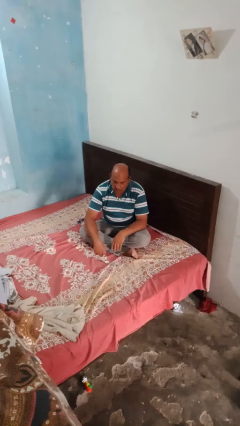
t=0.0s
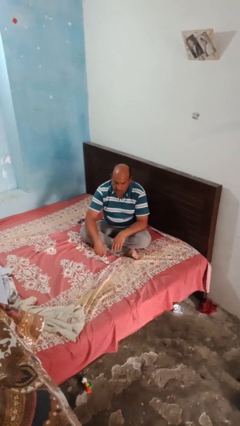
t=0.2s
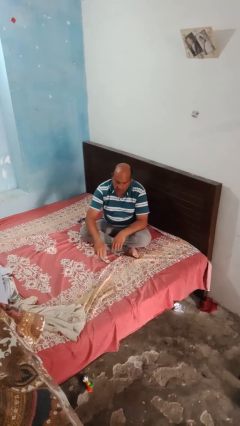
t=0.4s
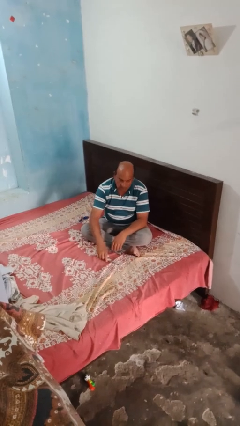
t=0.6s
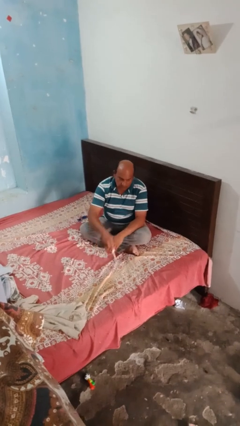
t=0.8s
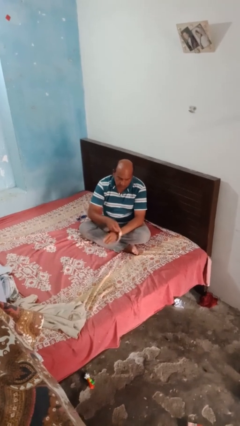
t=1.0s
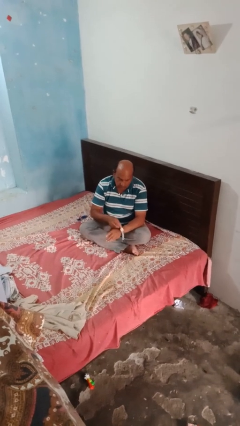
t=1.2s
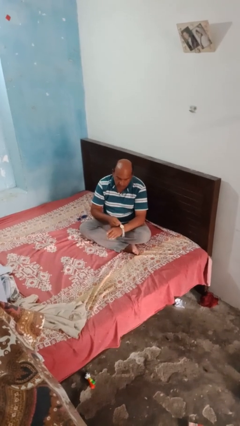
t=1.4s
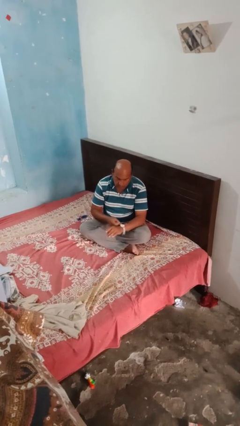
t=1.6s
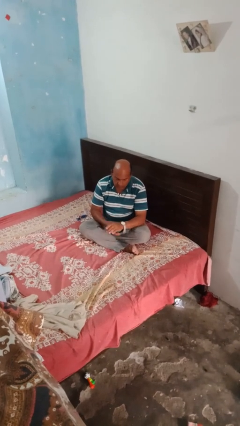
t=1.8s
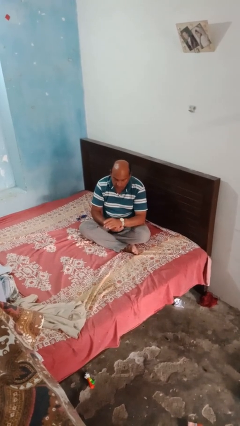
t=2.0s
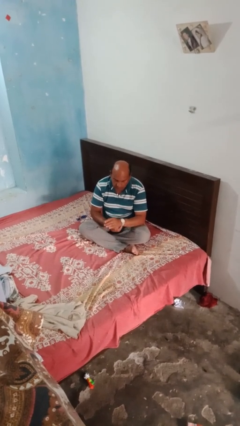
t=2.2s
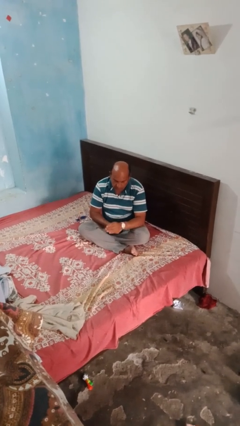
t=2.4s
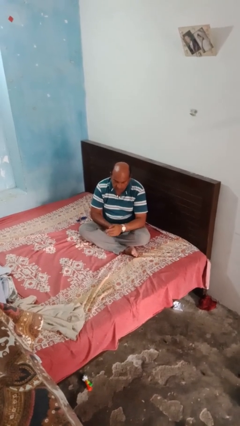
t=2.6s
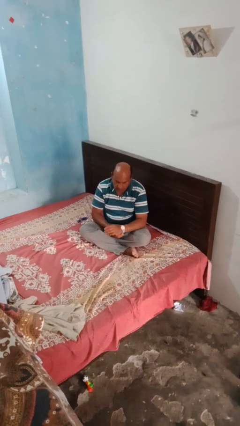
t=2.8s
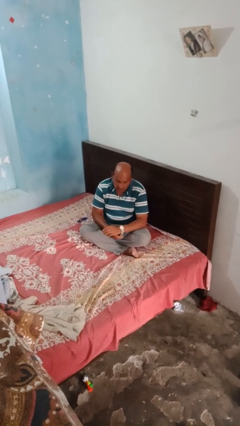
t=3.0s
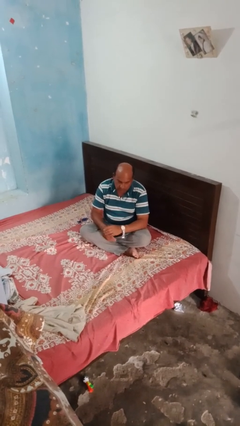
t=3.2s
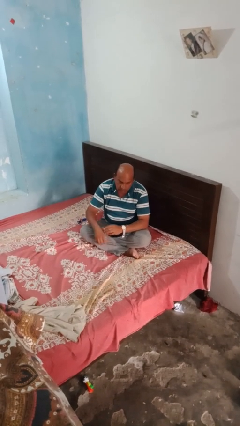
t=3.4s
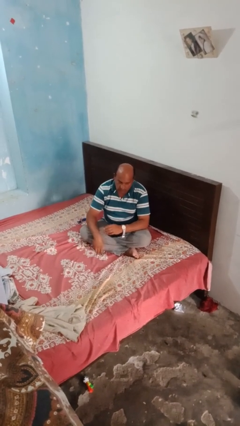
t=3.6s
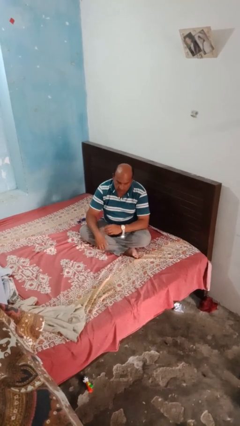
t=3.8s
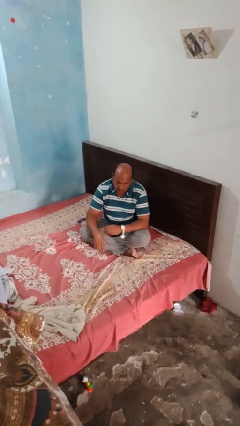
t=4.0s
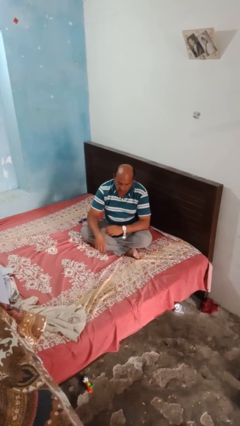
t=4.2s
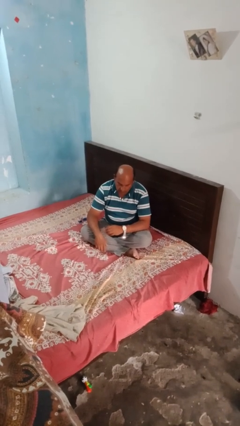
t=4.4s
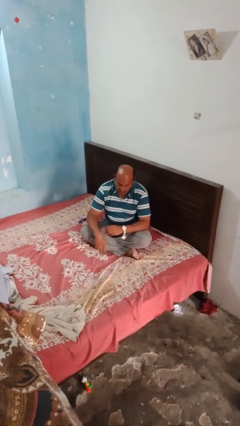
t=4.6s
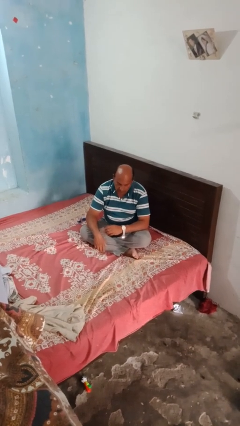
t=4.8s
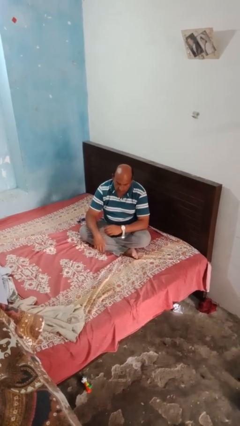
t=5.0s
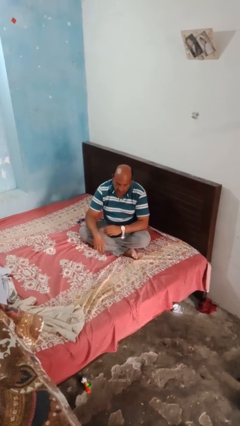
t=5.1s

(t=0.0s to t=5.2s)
person puts on wristwatch

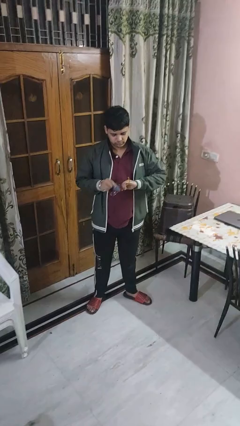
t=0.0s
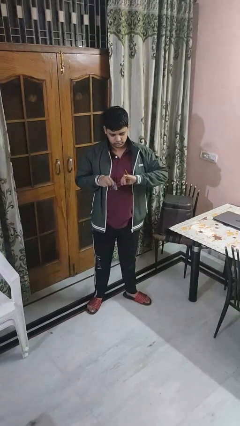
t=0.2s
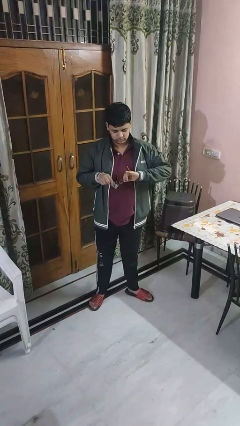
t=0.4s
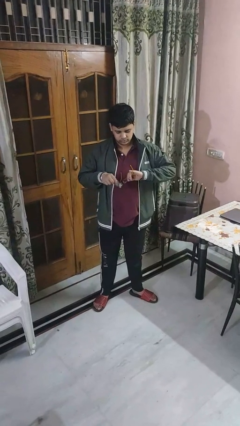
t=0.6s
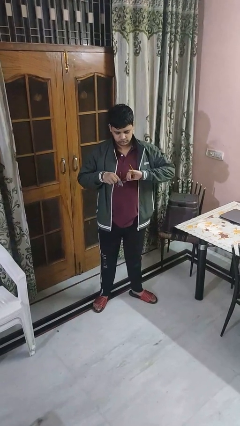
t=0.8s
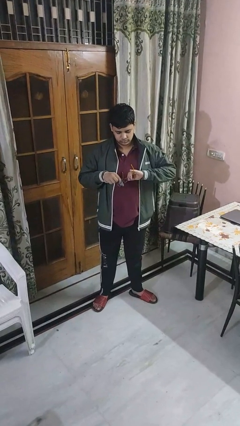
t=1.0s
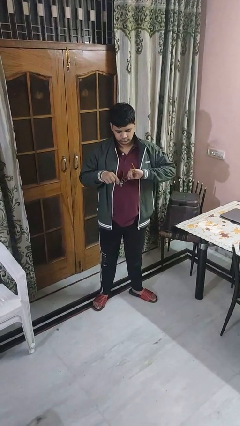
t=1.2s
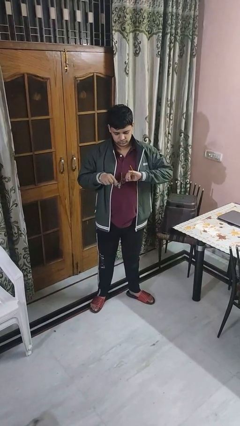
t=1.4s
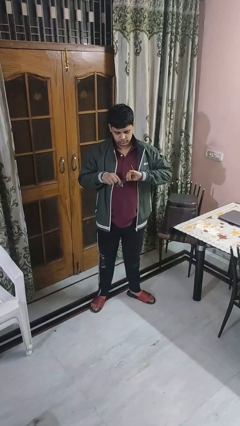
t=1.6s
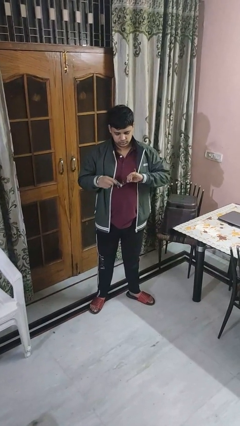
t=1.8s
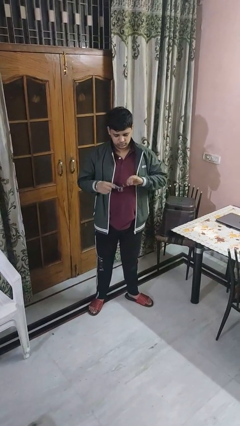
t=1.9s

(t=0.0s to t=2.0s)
person cleans eyeglasses

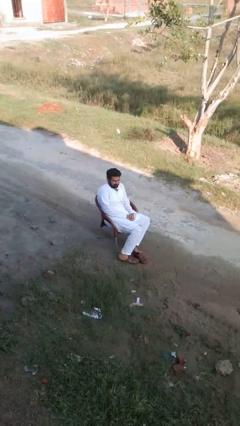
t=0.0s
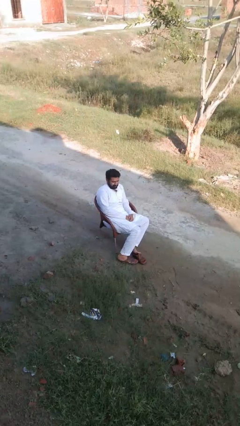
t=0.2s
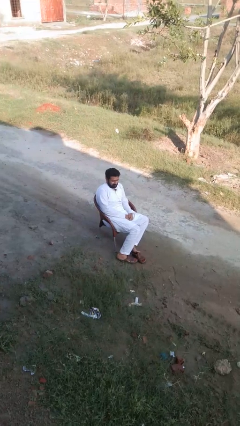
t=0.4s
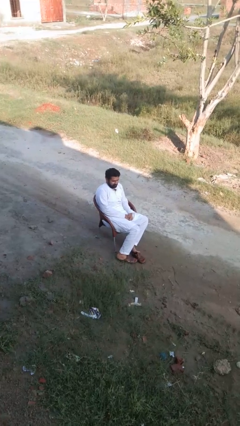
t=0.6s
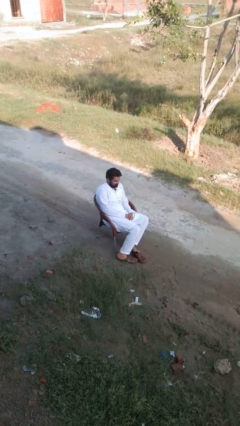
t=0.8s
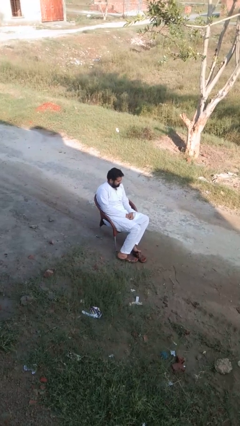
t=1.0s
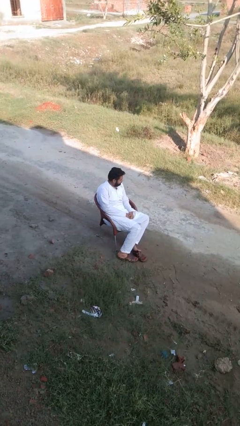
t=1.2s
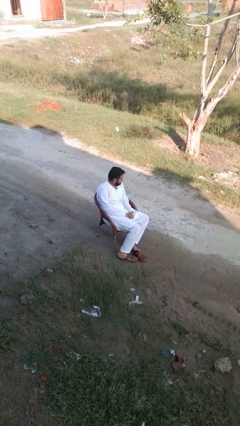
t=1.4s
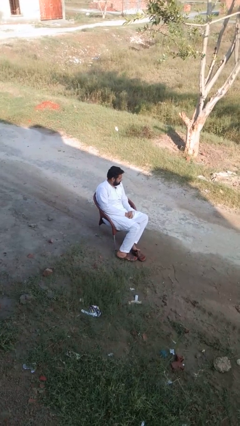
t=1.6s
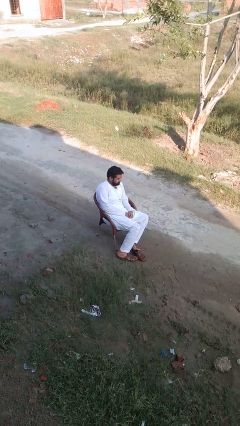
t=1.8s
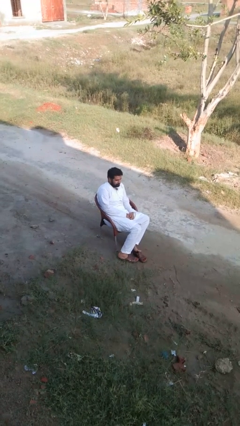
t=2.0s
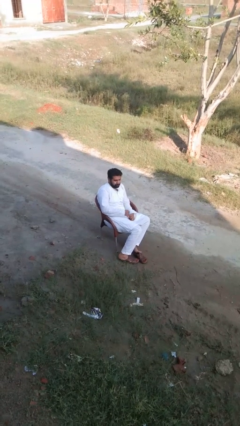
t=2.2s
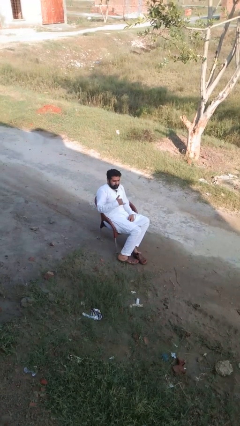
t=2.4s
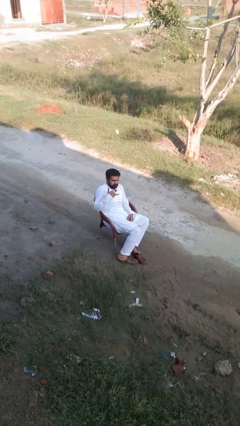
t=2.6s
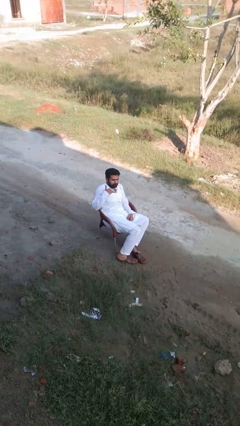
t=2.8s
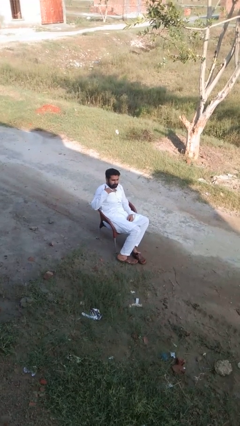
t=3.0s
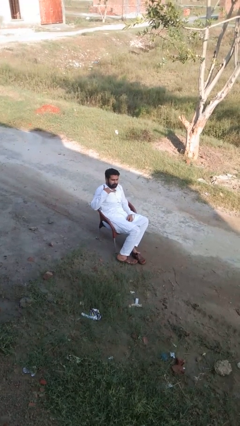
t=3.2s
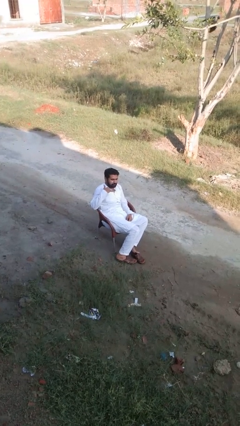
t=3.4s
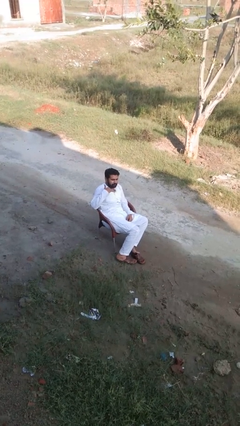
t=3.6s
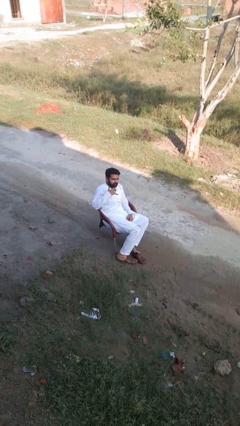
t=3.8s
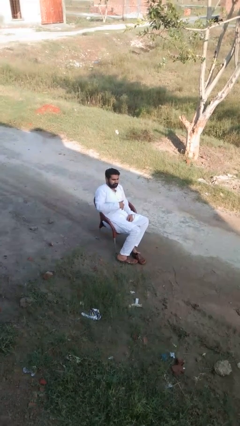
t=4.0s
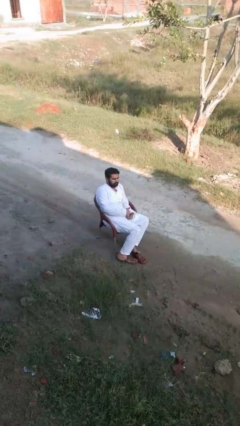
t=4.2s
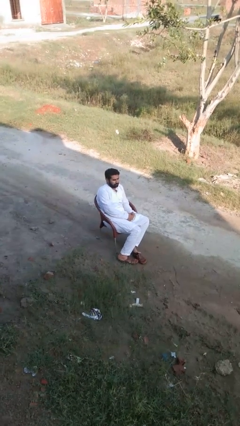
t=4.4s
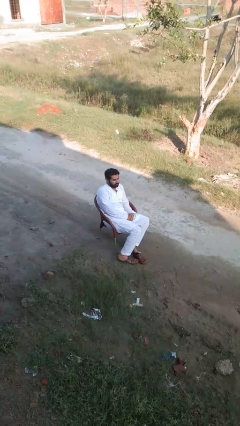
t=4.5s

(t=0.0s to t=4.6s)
person gestures call me

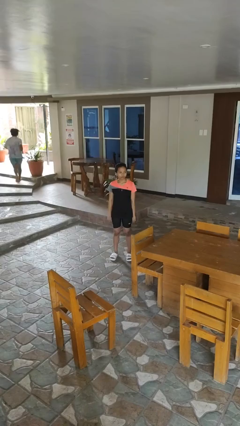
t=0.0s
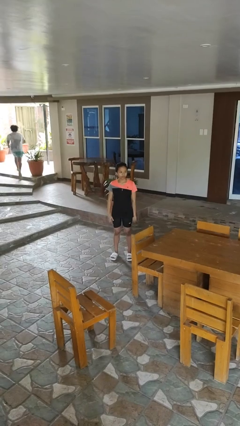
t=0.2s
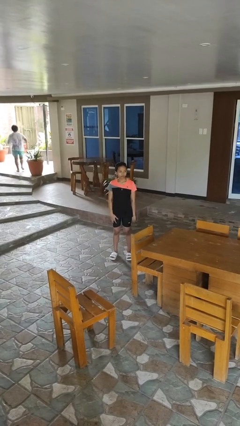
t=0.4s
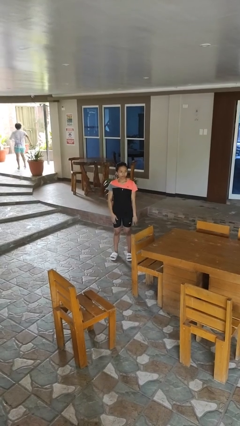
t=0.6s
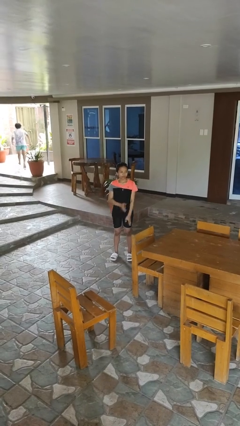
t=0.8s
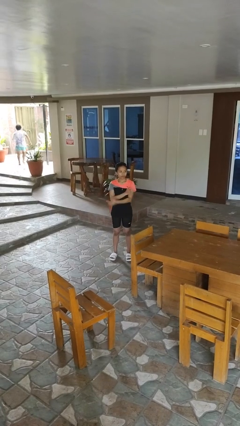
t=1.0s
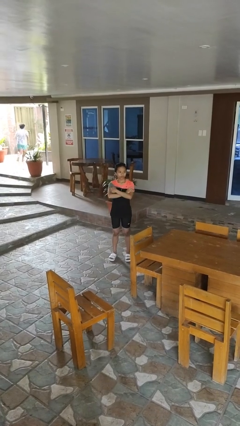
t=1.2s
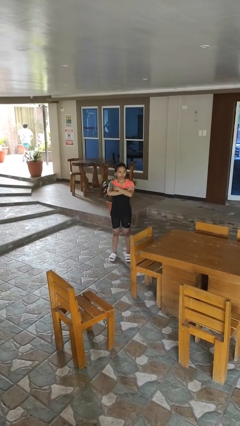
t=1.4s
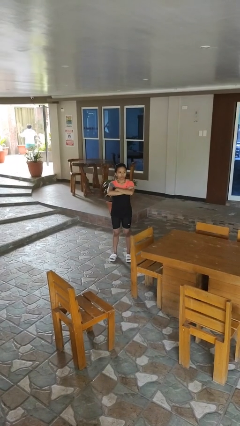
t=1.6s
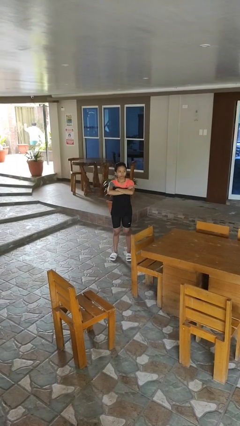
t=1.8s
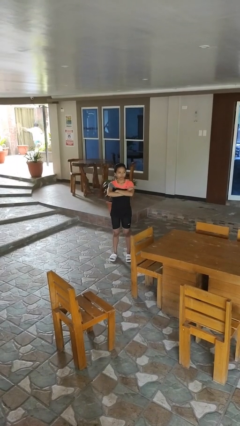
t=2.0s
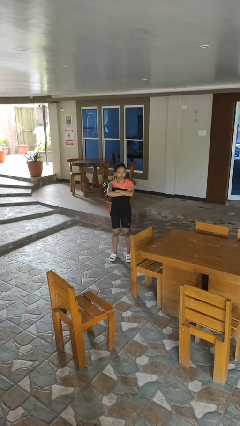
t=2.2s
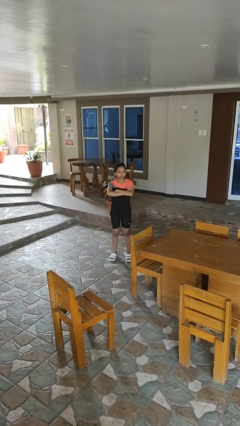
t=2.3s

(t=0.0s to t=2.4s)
person crosses arms

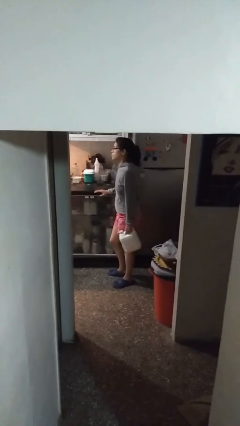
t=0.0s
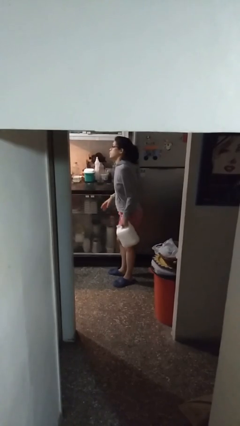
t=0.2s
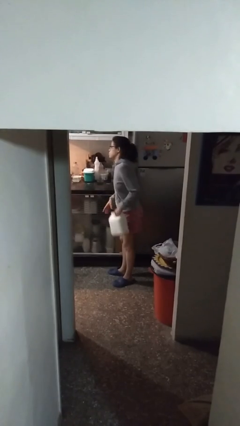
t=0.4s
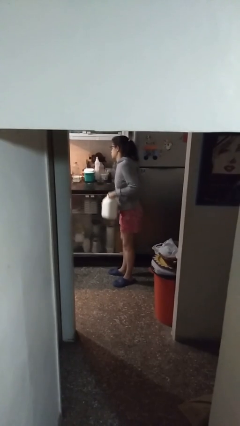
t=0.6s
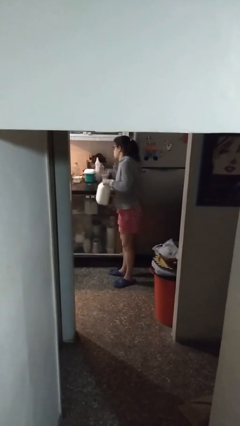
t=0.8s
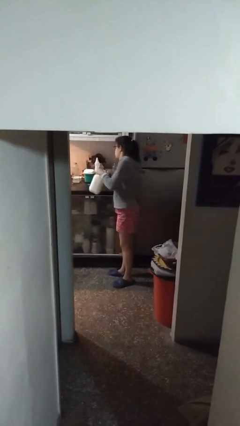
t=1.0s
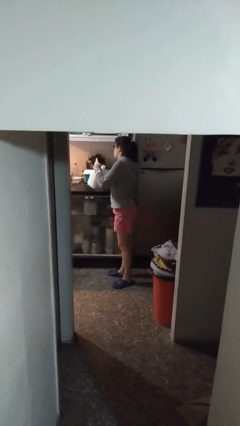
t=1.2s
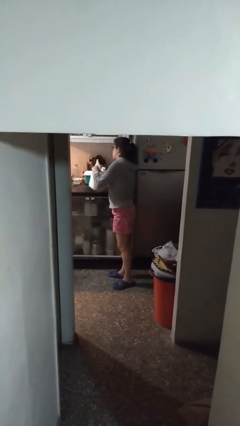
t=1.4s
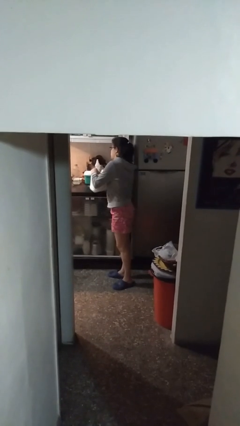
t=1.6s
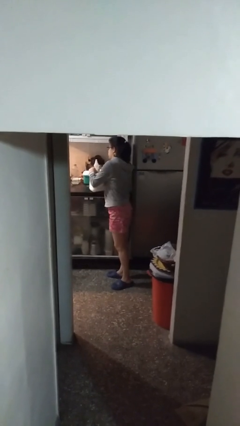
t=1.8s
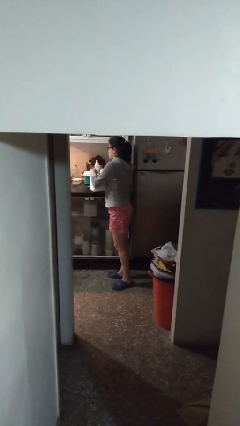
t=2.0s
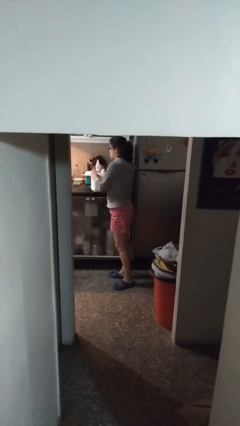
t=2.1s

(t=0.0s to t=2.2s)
person puts down object on countertop

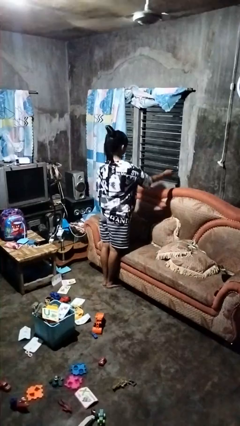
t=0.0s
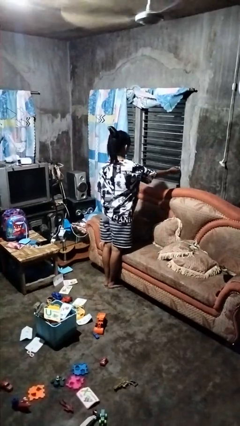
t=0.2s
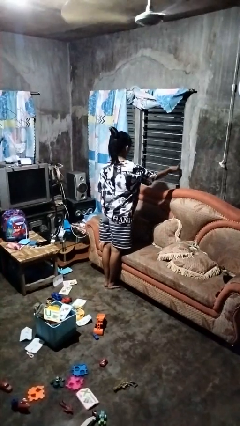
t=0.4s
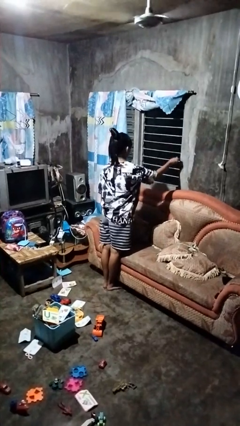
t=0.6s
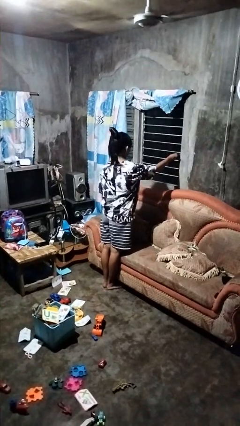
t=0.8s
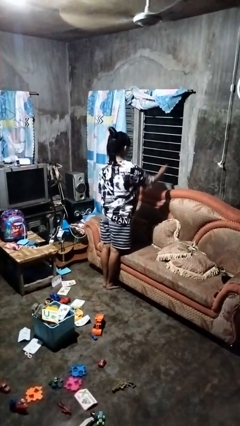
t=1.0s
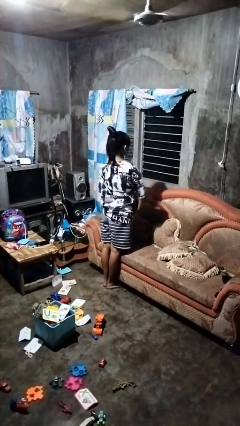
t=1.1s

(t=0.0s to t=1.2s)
person closes home window
